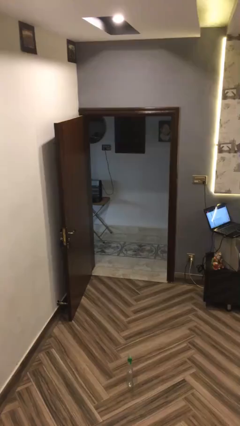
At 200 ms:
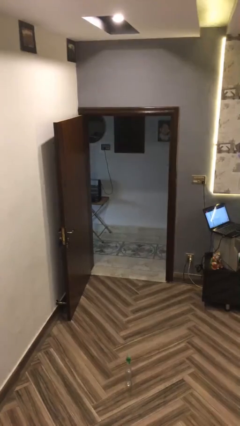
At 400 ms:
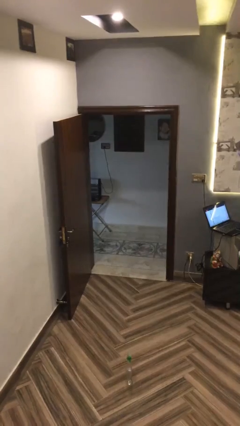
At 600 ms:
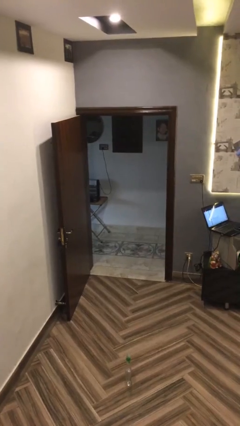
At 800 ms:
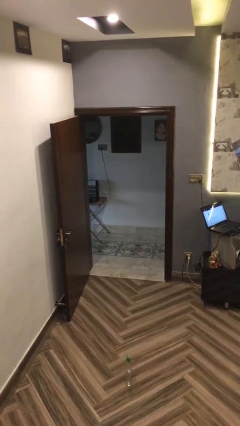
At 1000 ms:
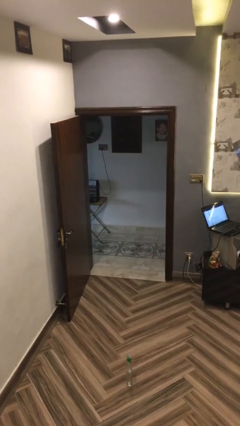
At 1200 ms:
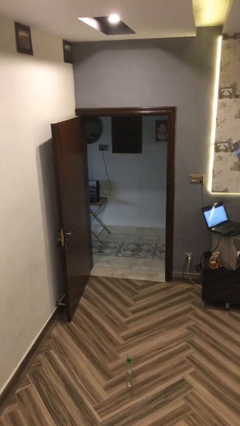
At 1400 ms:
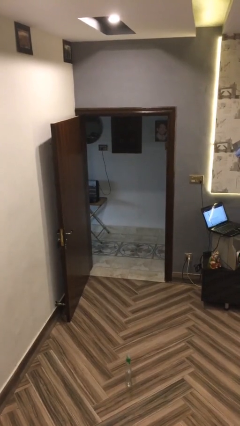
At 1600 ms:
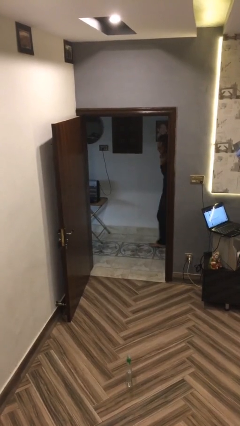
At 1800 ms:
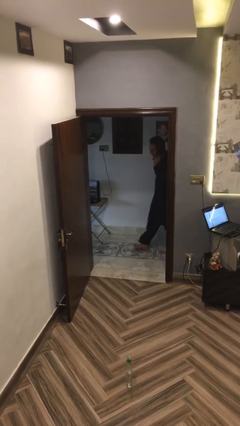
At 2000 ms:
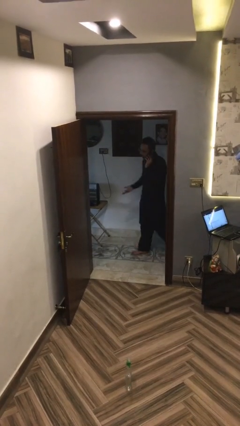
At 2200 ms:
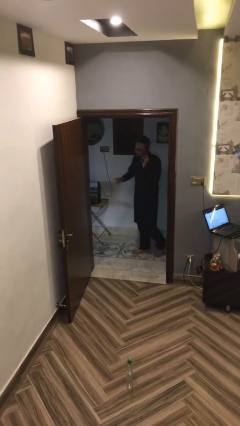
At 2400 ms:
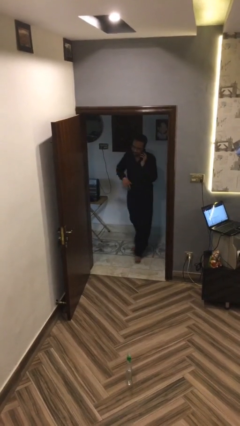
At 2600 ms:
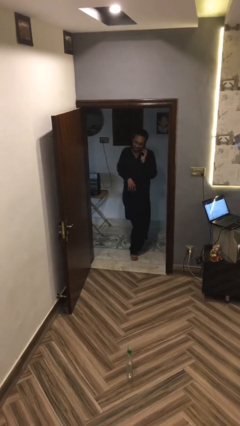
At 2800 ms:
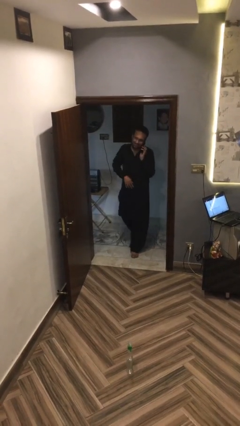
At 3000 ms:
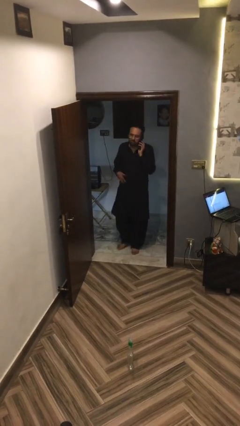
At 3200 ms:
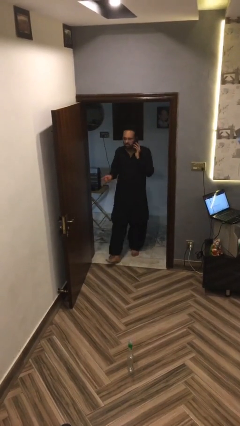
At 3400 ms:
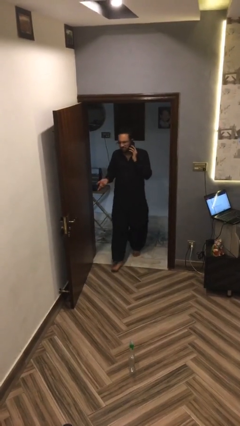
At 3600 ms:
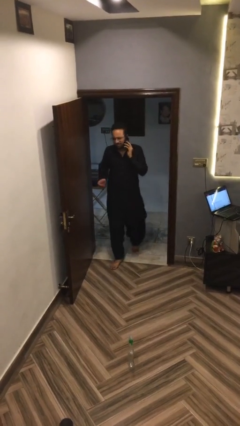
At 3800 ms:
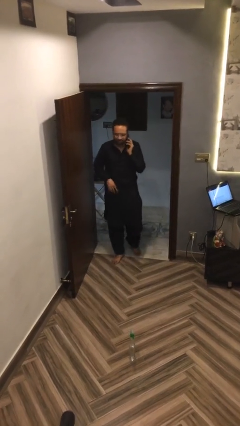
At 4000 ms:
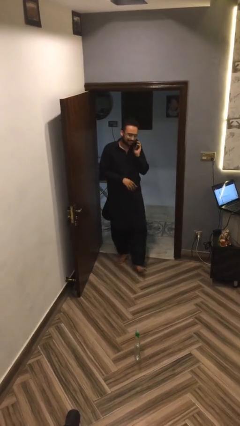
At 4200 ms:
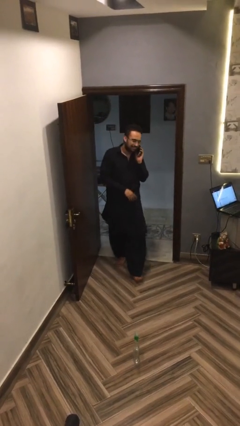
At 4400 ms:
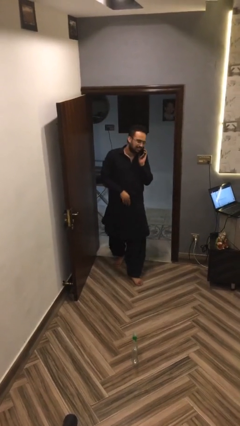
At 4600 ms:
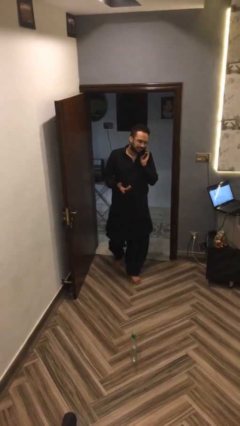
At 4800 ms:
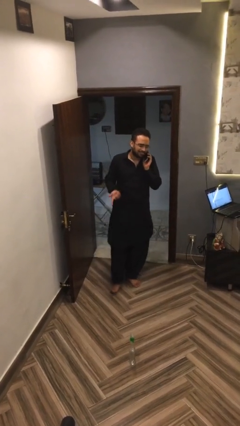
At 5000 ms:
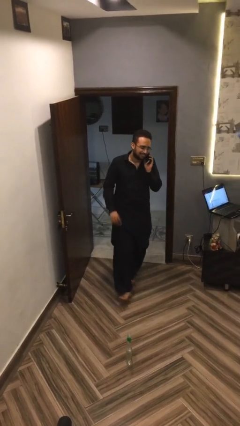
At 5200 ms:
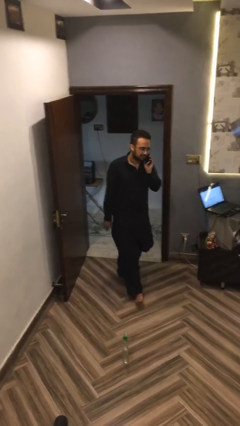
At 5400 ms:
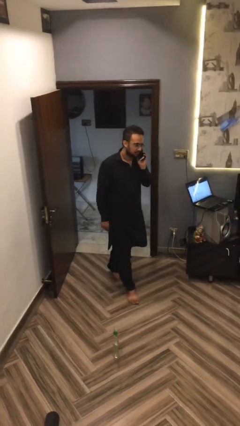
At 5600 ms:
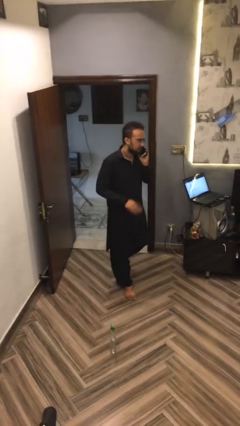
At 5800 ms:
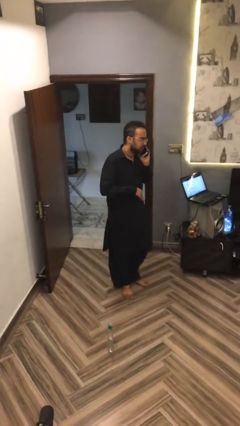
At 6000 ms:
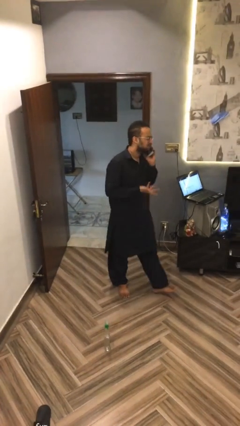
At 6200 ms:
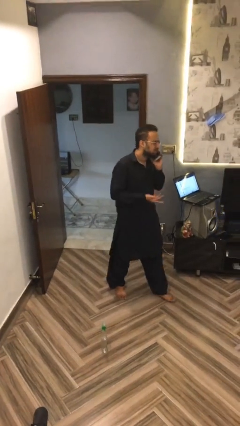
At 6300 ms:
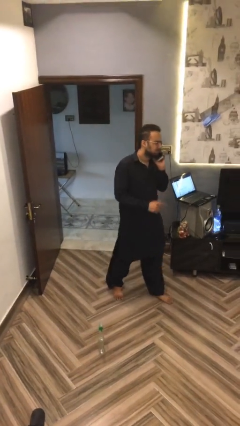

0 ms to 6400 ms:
person enters scene through structure

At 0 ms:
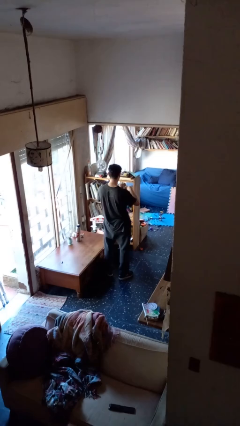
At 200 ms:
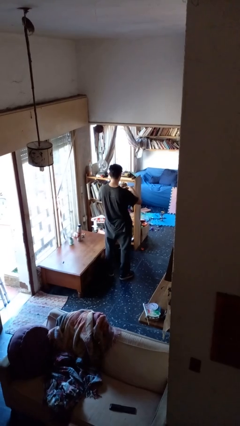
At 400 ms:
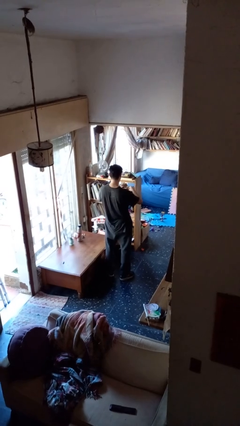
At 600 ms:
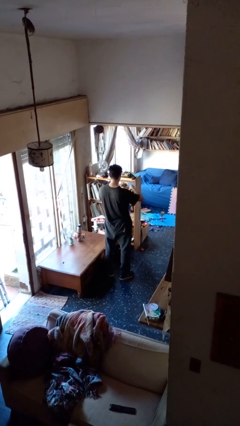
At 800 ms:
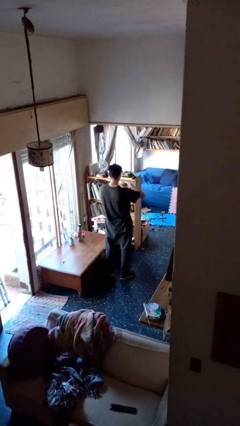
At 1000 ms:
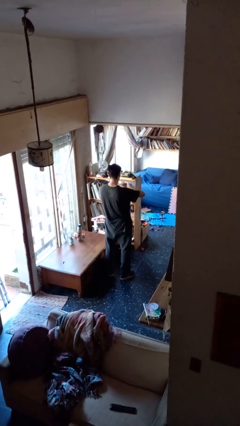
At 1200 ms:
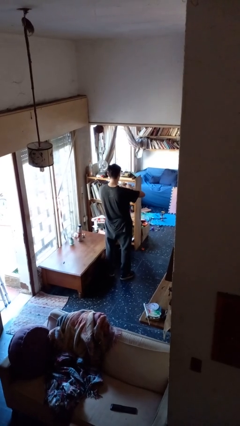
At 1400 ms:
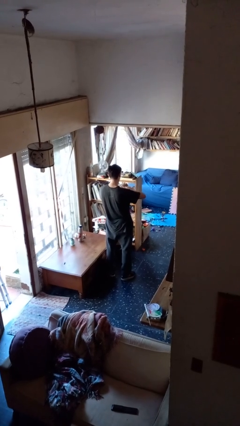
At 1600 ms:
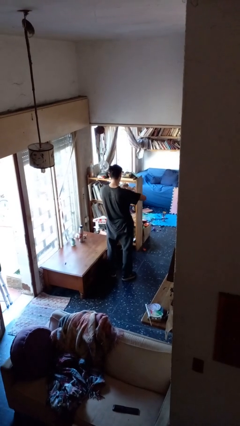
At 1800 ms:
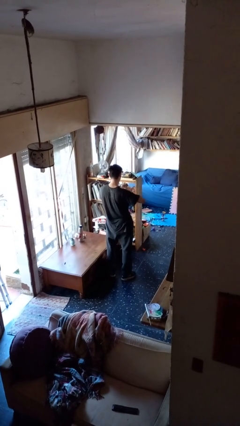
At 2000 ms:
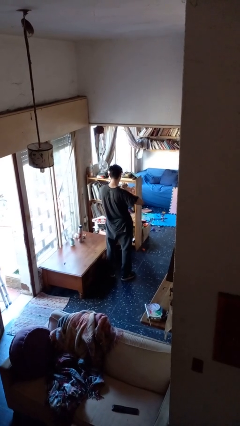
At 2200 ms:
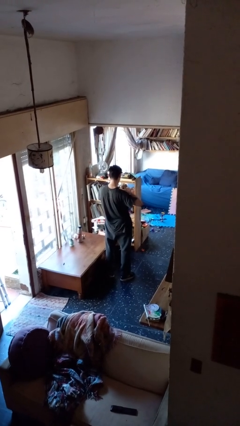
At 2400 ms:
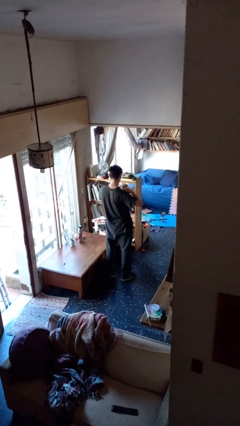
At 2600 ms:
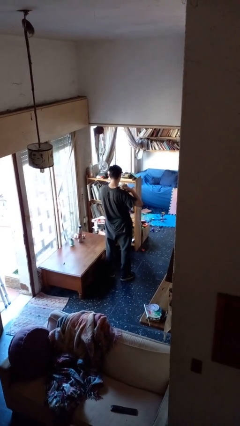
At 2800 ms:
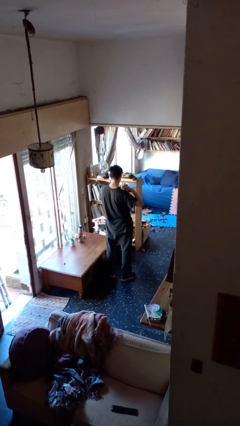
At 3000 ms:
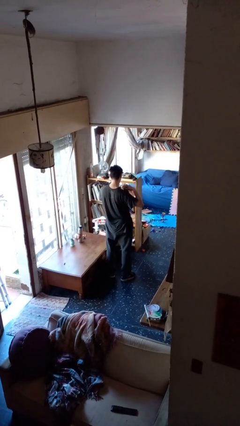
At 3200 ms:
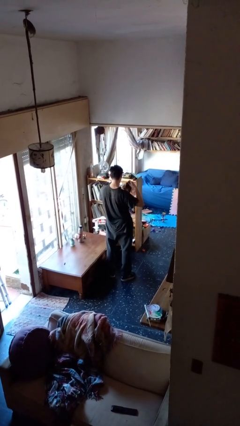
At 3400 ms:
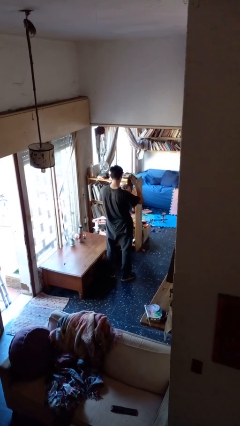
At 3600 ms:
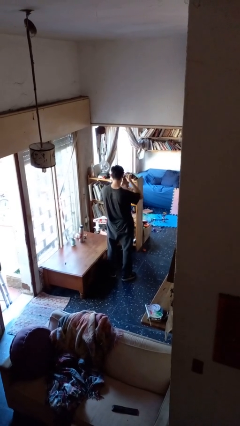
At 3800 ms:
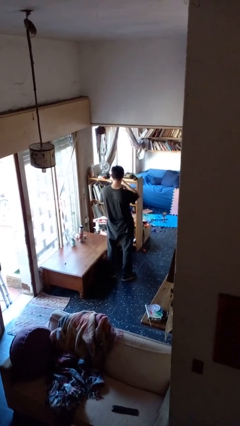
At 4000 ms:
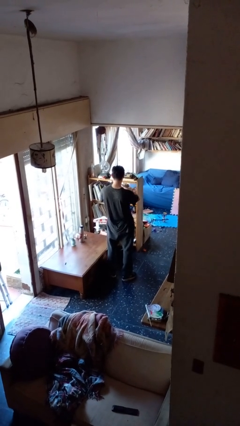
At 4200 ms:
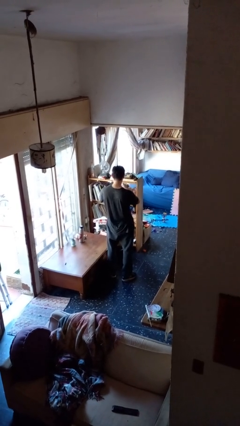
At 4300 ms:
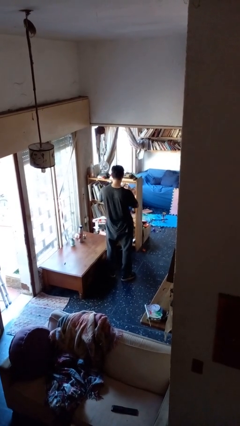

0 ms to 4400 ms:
person tears paper

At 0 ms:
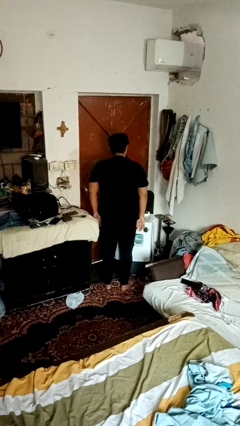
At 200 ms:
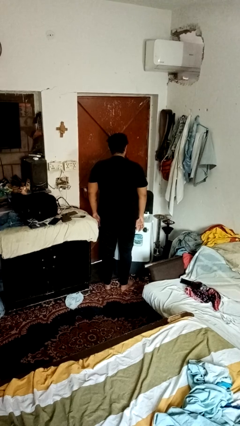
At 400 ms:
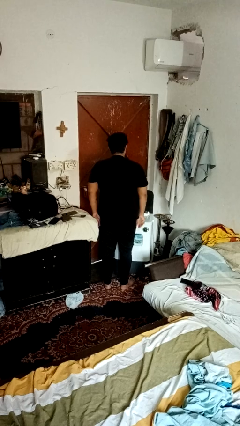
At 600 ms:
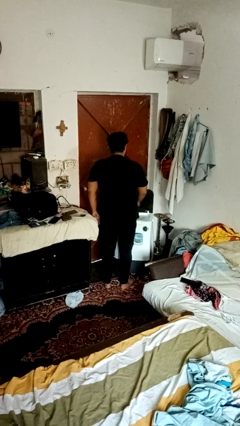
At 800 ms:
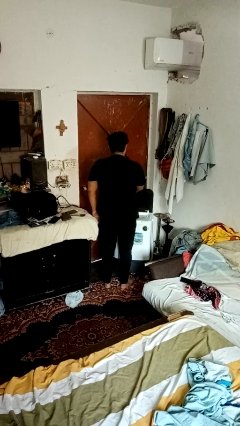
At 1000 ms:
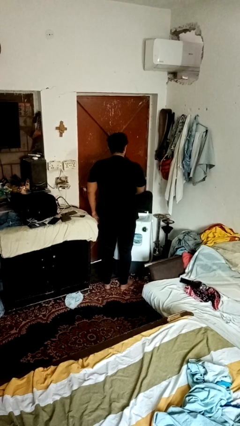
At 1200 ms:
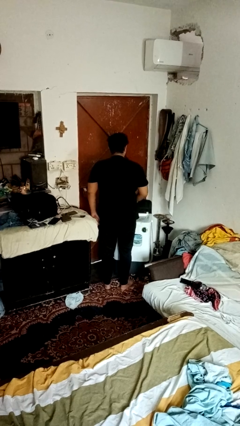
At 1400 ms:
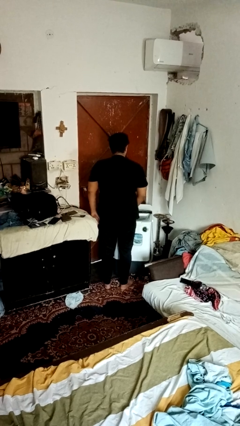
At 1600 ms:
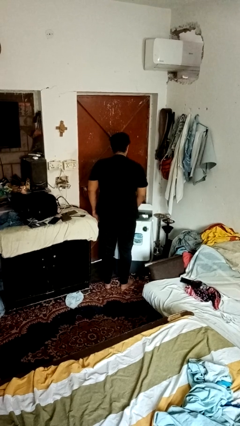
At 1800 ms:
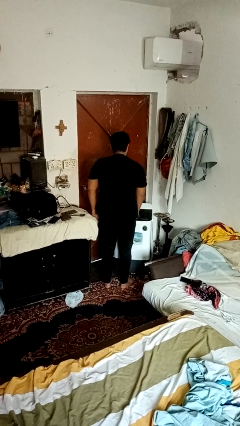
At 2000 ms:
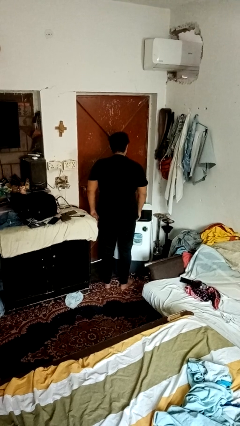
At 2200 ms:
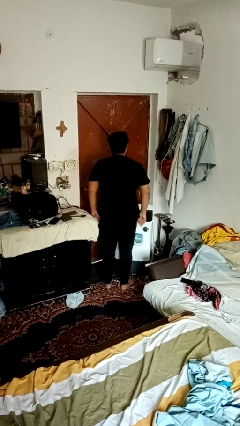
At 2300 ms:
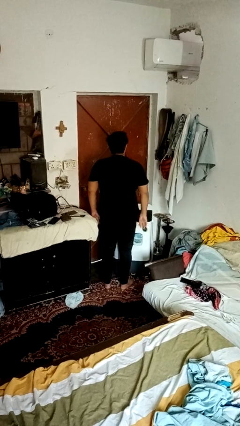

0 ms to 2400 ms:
person closes clothes washer

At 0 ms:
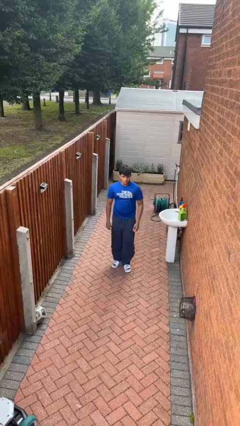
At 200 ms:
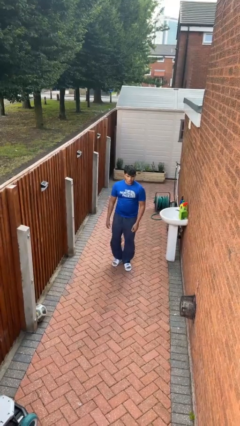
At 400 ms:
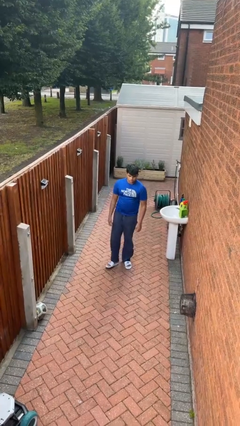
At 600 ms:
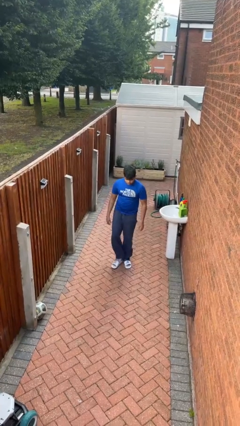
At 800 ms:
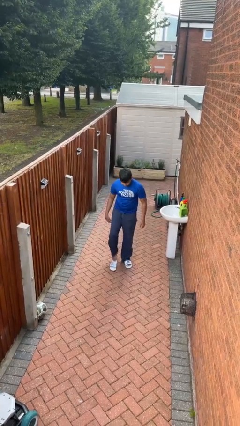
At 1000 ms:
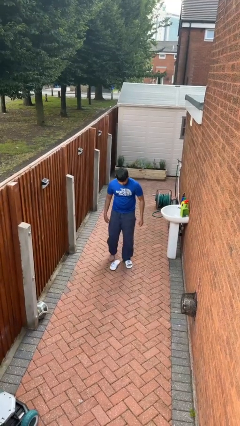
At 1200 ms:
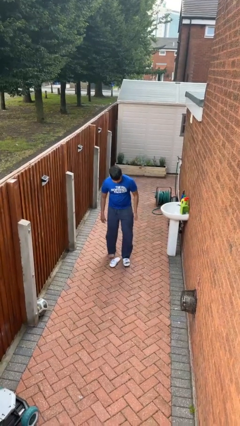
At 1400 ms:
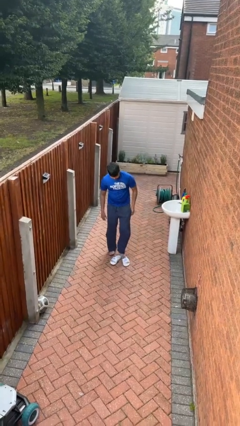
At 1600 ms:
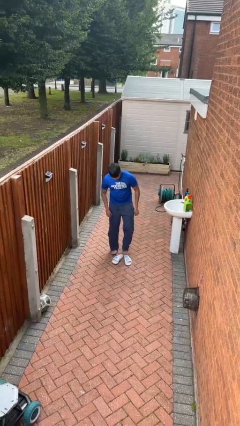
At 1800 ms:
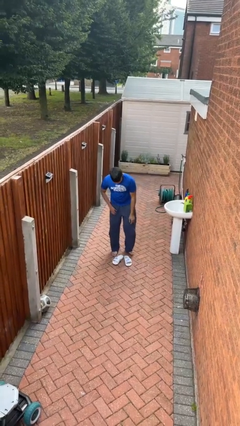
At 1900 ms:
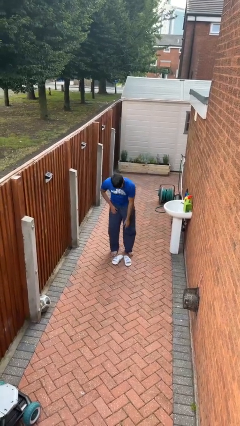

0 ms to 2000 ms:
person takes off shoes

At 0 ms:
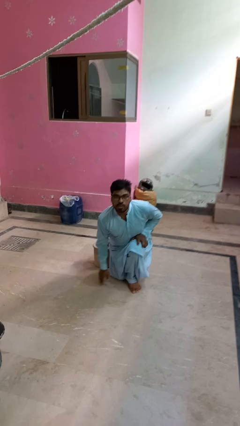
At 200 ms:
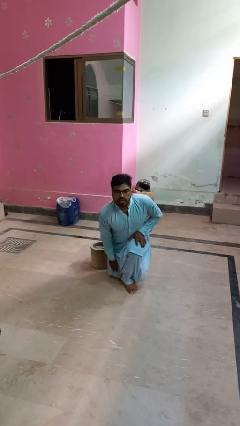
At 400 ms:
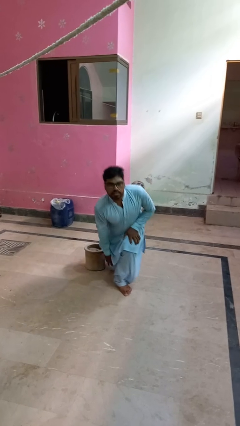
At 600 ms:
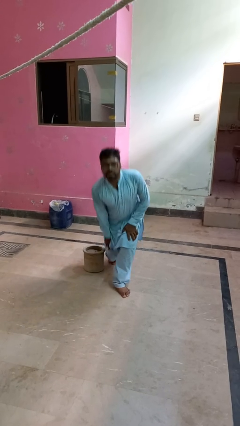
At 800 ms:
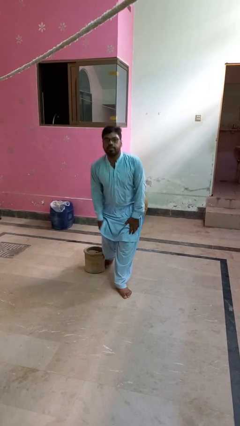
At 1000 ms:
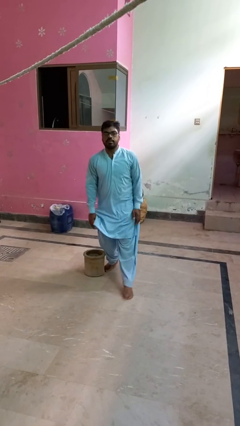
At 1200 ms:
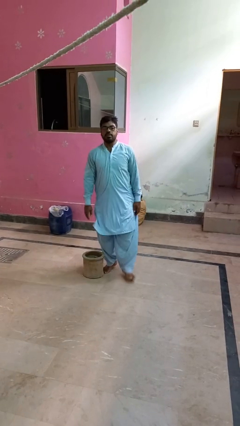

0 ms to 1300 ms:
person stands up from floor

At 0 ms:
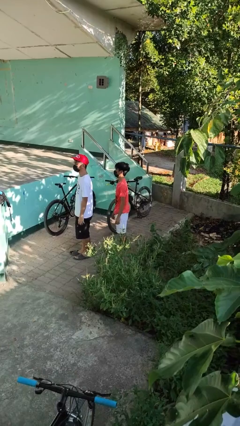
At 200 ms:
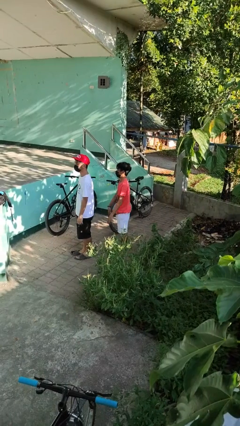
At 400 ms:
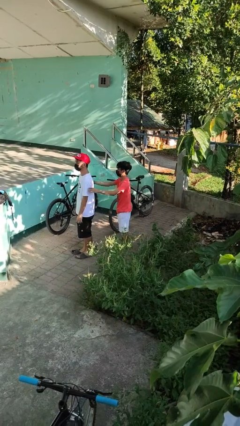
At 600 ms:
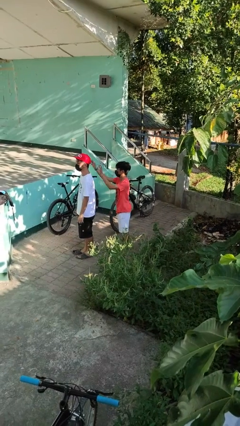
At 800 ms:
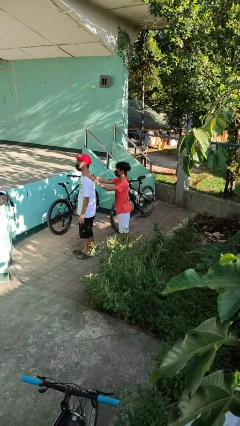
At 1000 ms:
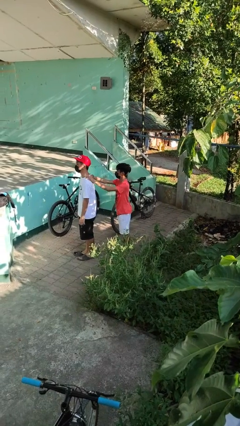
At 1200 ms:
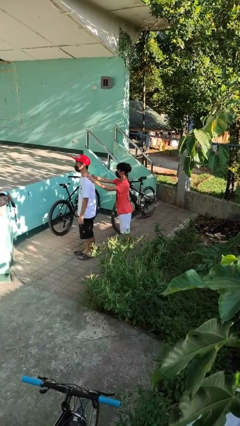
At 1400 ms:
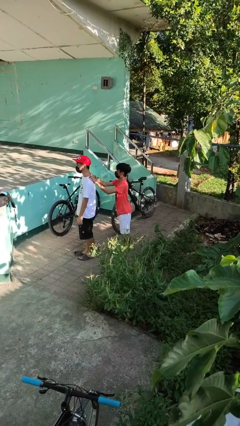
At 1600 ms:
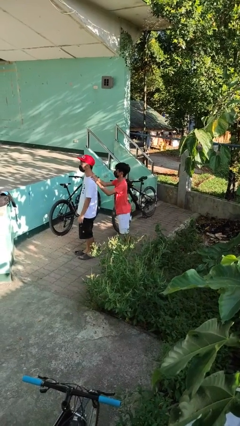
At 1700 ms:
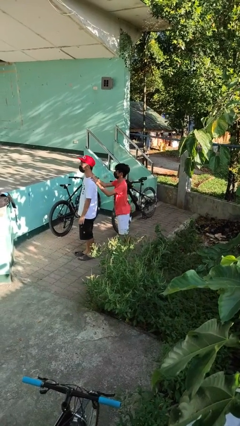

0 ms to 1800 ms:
person grabs person by shoulder
